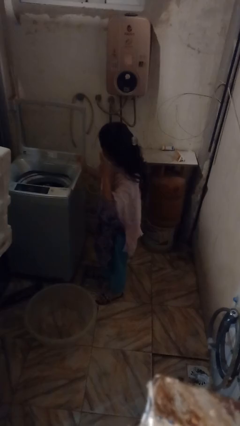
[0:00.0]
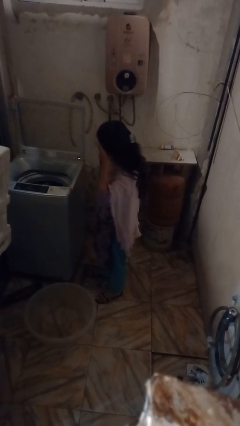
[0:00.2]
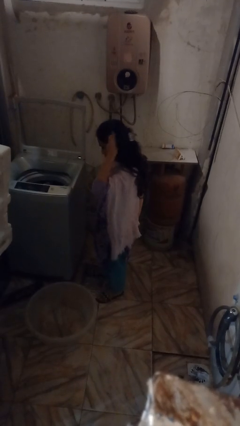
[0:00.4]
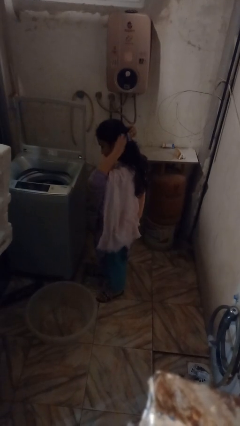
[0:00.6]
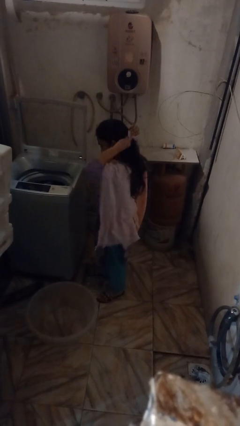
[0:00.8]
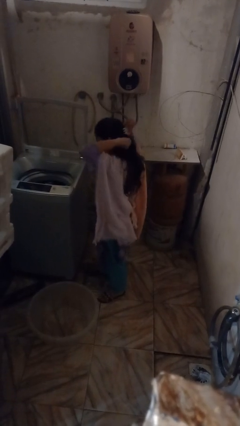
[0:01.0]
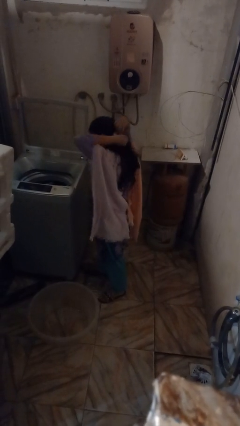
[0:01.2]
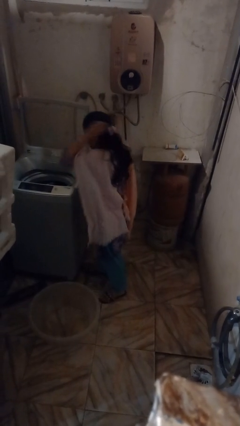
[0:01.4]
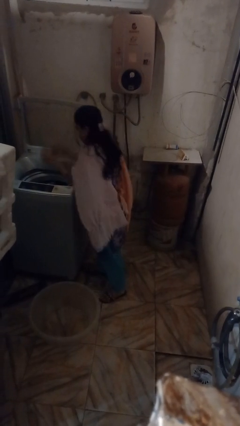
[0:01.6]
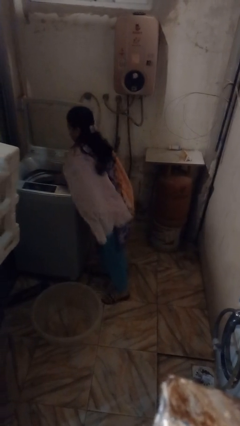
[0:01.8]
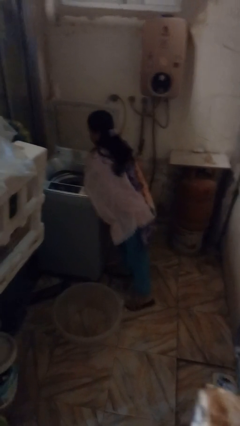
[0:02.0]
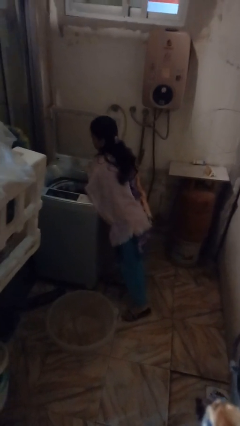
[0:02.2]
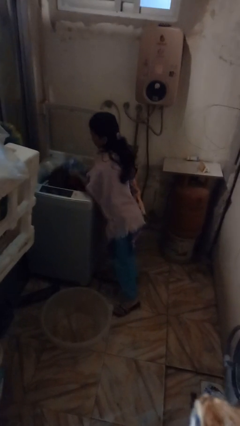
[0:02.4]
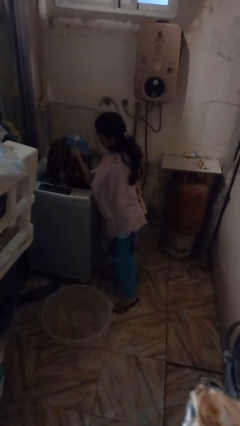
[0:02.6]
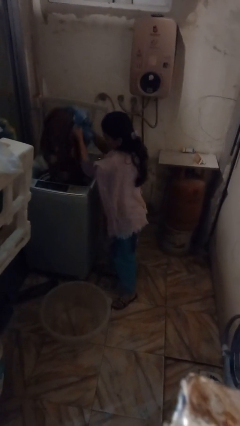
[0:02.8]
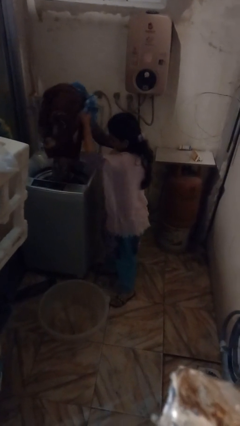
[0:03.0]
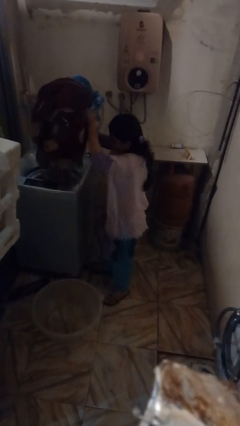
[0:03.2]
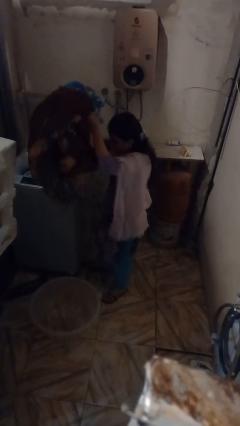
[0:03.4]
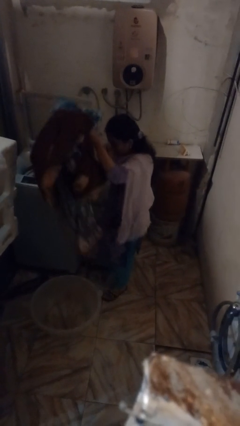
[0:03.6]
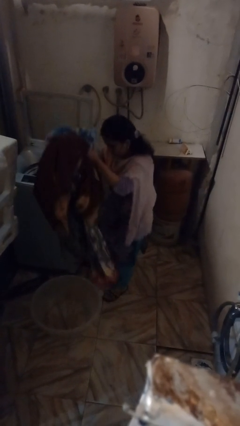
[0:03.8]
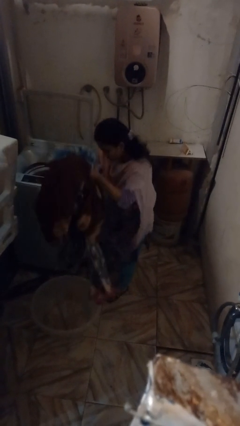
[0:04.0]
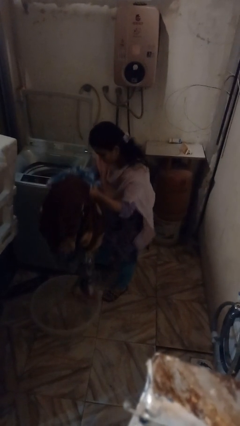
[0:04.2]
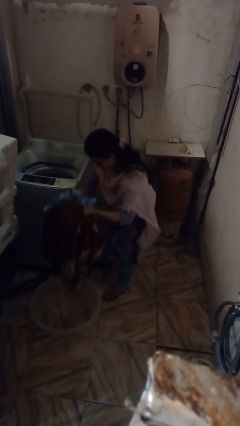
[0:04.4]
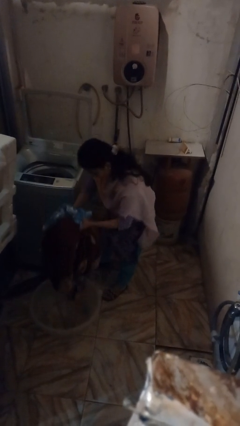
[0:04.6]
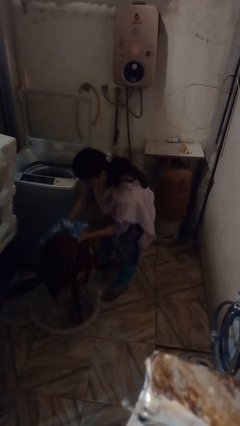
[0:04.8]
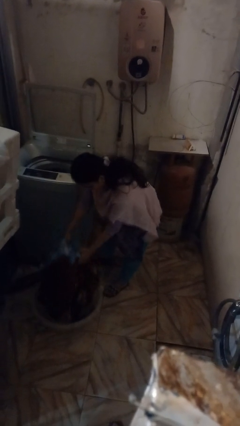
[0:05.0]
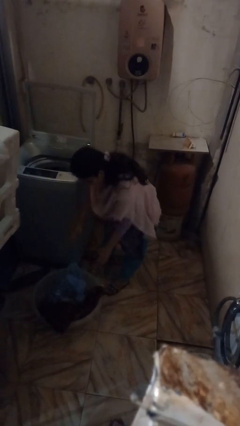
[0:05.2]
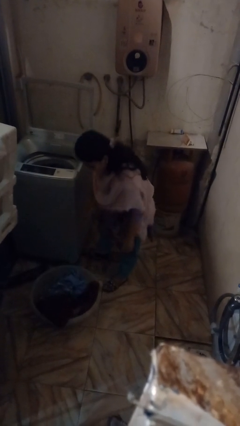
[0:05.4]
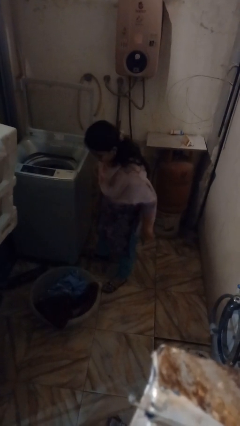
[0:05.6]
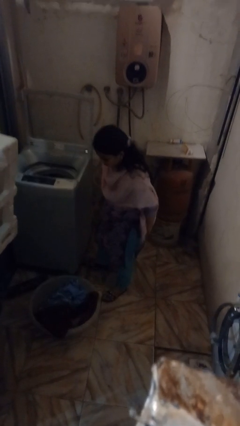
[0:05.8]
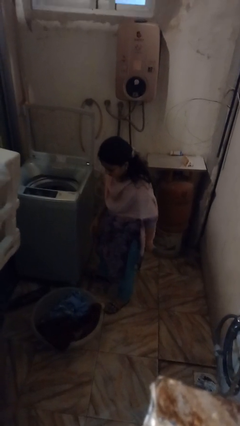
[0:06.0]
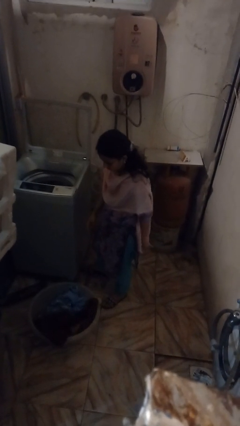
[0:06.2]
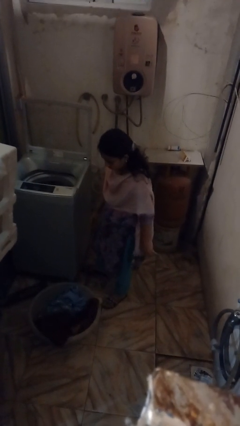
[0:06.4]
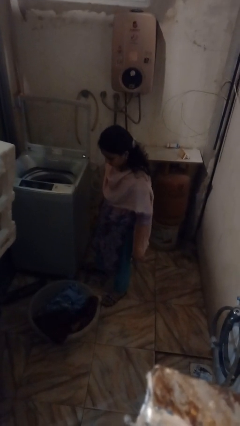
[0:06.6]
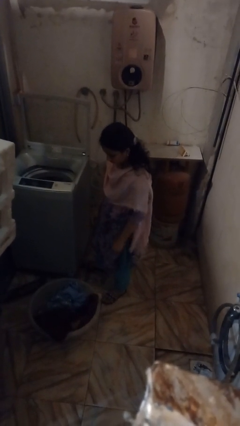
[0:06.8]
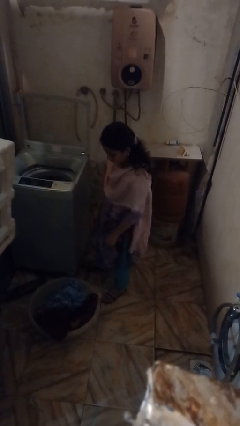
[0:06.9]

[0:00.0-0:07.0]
person unloads clotheswasher

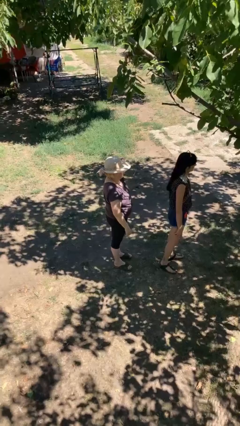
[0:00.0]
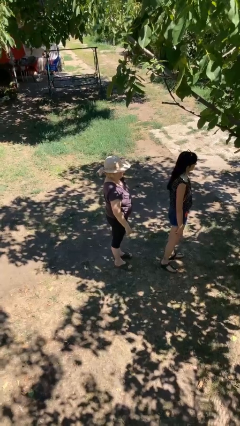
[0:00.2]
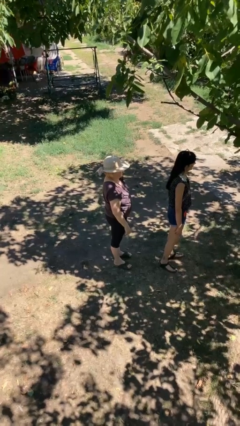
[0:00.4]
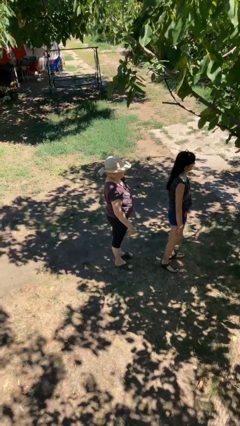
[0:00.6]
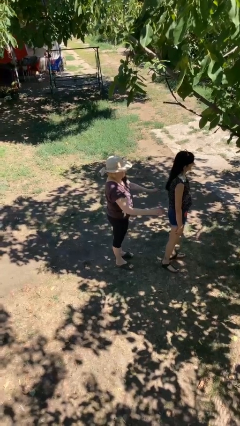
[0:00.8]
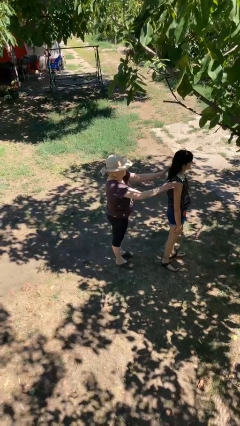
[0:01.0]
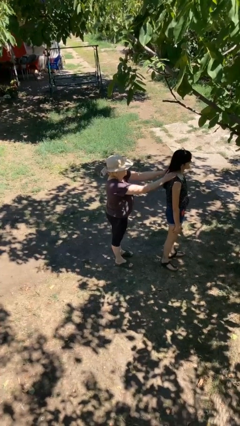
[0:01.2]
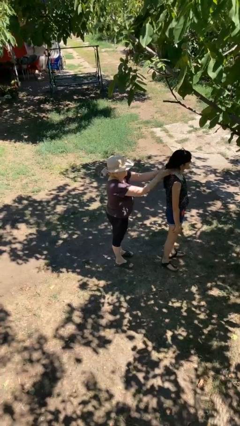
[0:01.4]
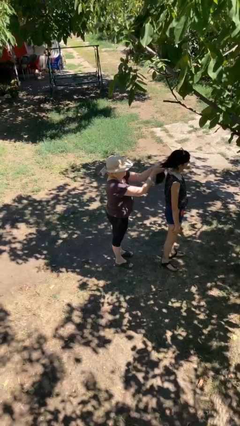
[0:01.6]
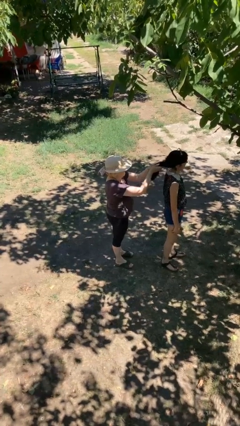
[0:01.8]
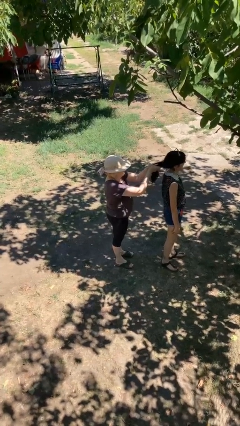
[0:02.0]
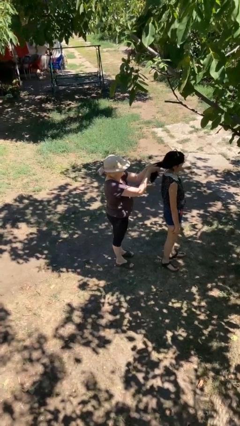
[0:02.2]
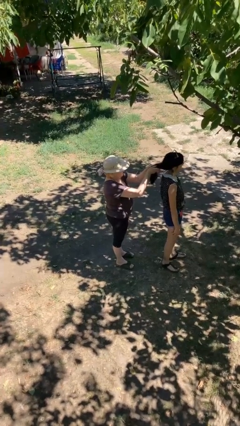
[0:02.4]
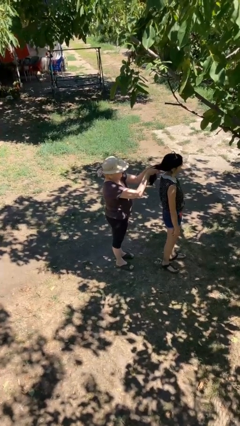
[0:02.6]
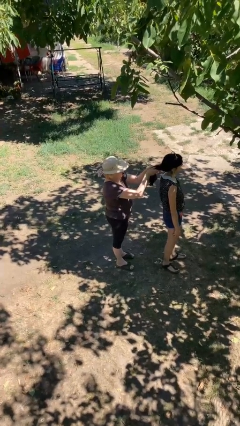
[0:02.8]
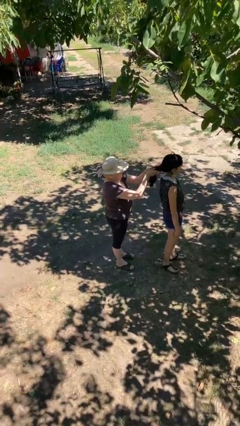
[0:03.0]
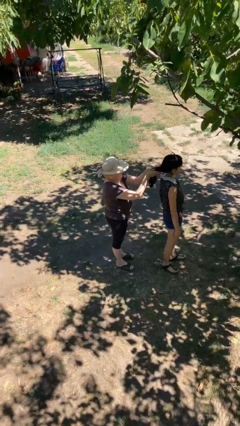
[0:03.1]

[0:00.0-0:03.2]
person grabs person by hair

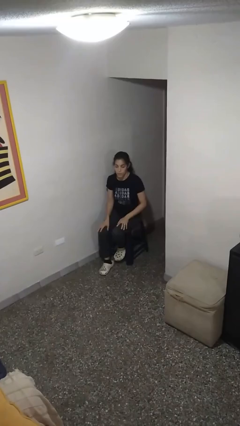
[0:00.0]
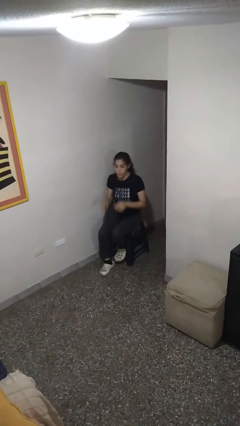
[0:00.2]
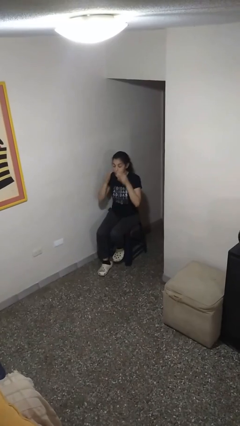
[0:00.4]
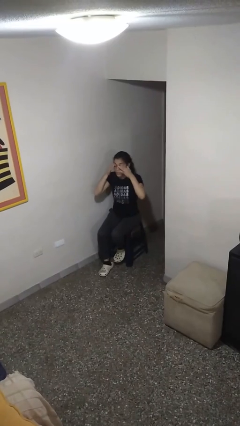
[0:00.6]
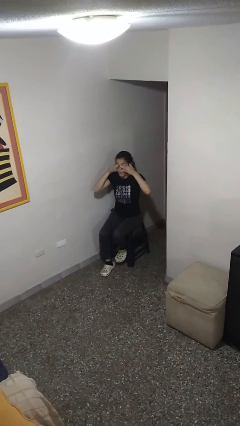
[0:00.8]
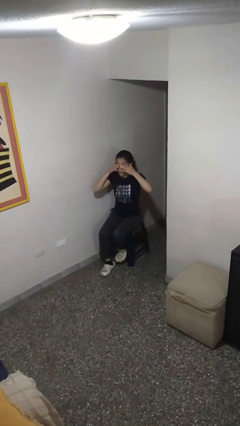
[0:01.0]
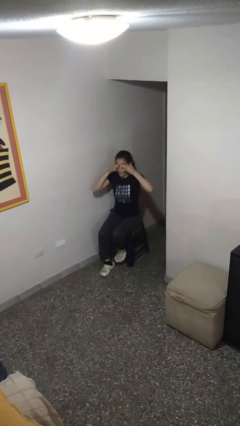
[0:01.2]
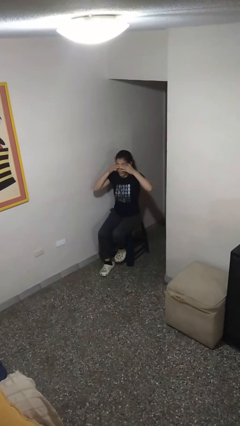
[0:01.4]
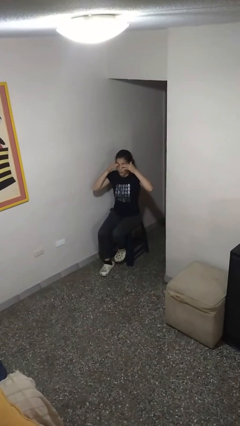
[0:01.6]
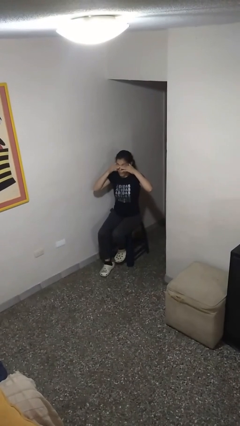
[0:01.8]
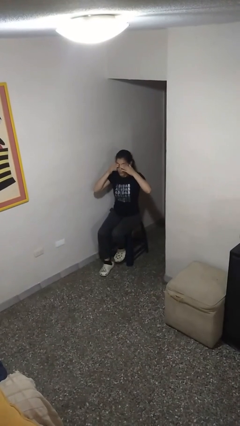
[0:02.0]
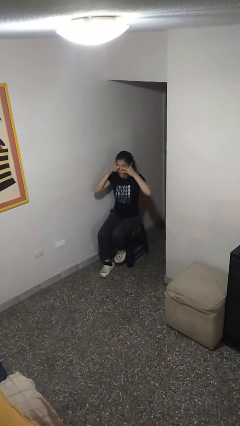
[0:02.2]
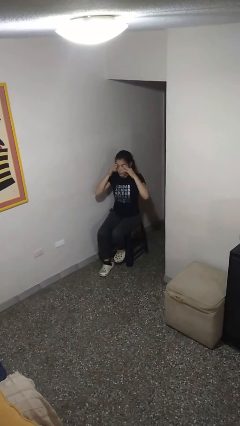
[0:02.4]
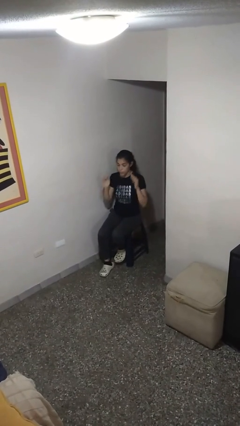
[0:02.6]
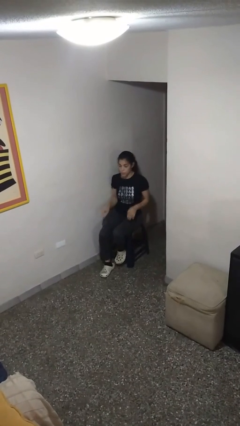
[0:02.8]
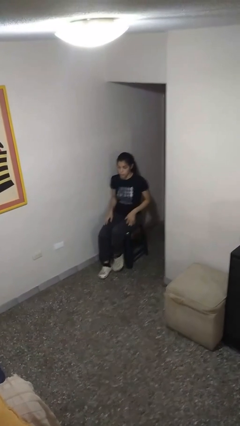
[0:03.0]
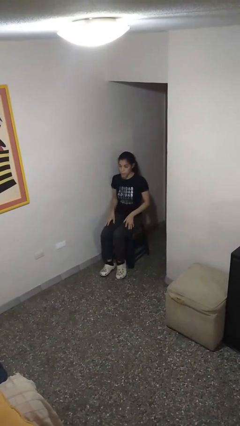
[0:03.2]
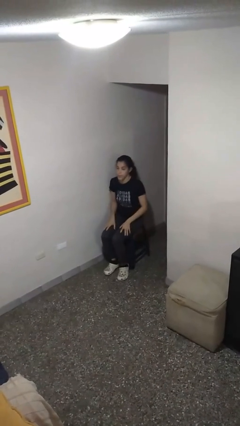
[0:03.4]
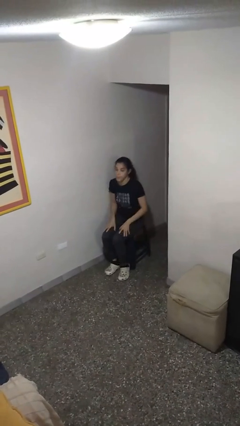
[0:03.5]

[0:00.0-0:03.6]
person rubs eyes

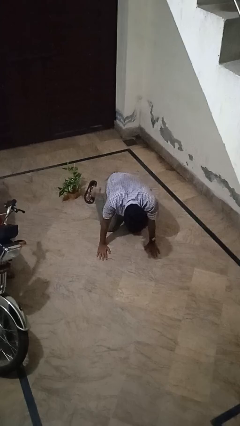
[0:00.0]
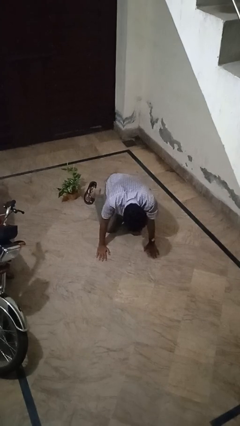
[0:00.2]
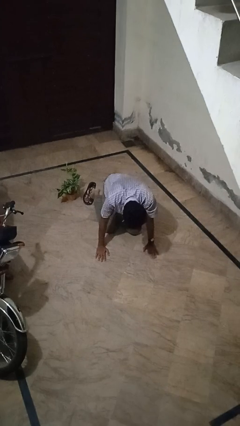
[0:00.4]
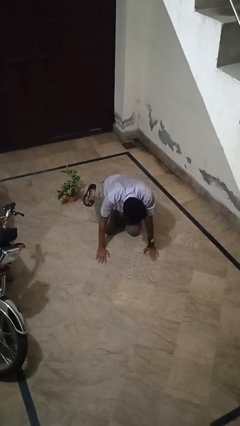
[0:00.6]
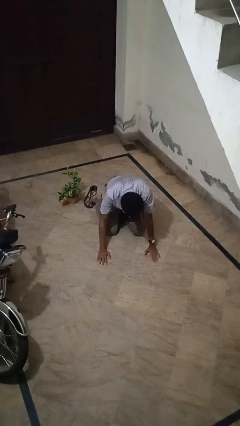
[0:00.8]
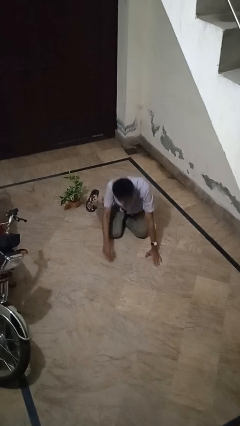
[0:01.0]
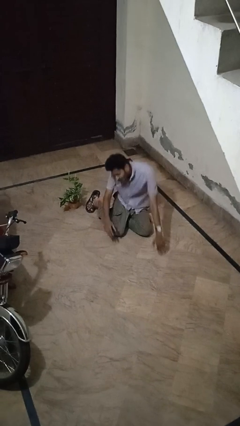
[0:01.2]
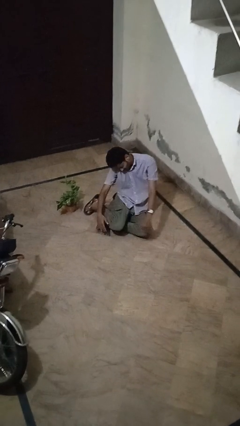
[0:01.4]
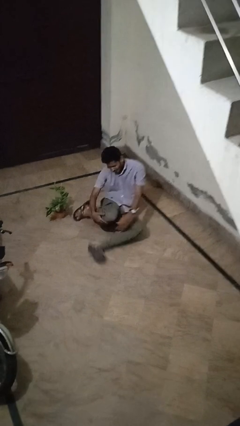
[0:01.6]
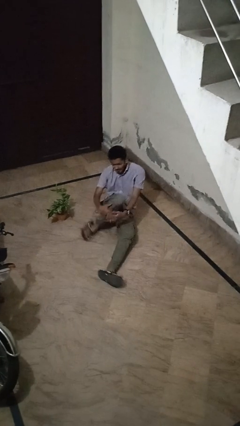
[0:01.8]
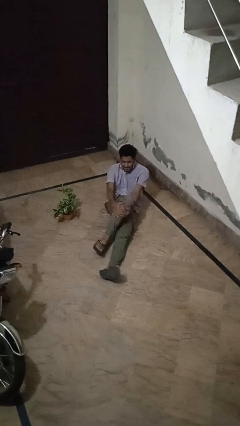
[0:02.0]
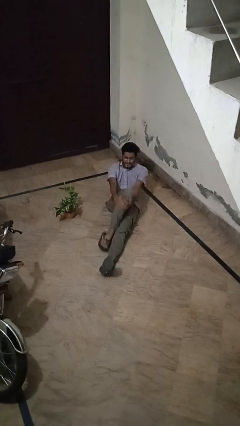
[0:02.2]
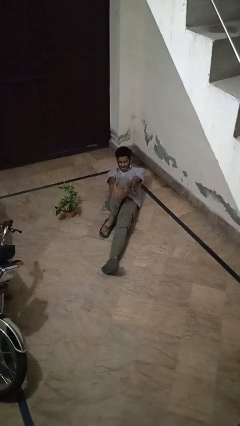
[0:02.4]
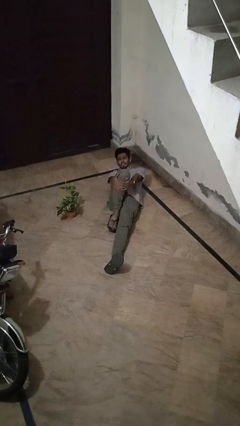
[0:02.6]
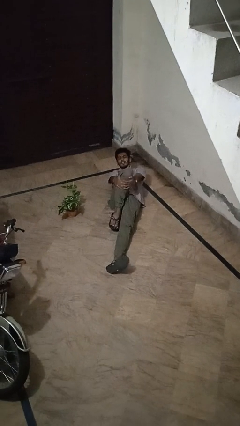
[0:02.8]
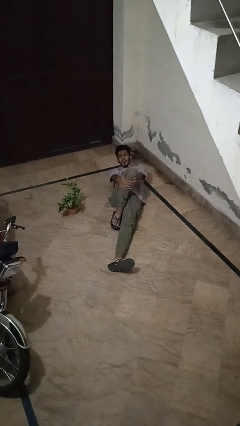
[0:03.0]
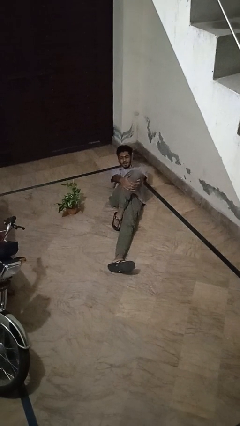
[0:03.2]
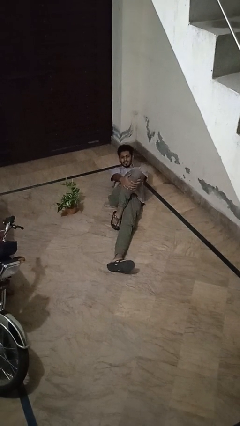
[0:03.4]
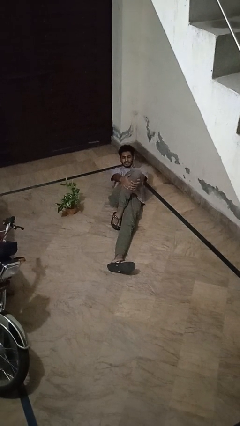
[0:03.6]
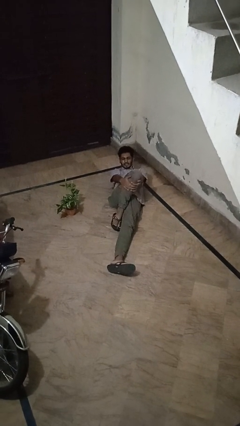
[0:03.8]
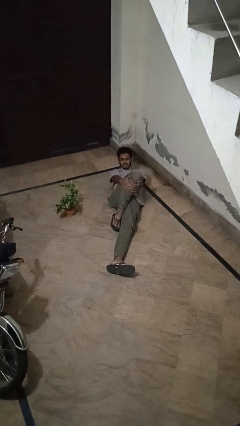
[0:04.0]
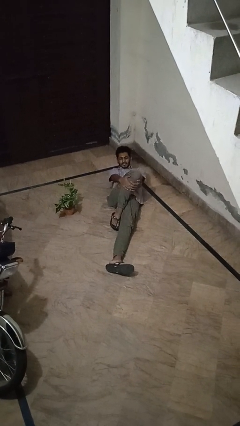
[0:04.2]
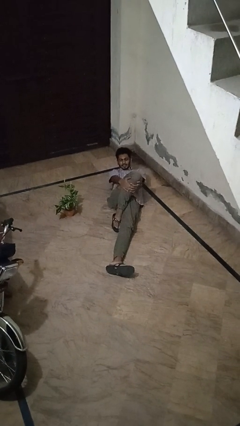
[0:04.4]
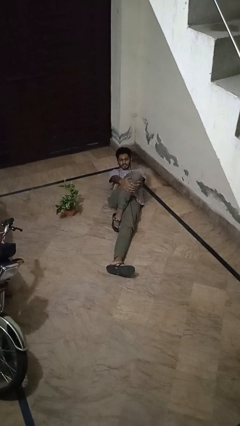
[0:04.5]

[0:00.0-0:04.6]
person lies down on floor
